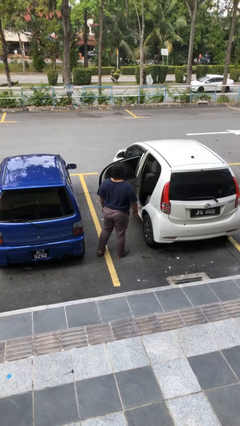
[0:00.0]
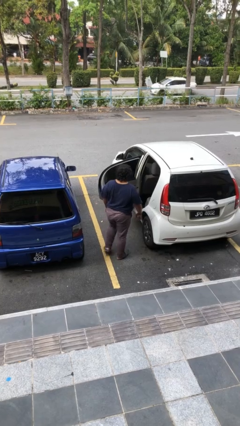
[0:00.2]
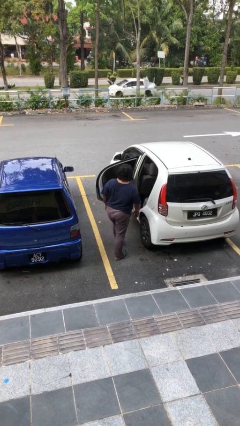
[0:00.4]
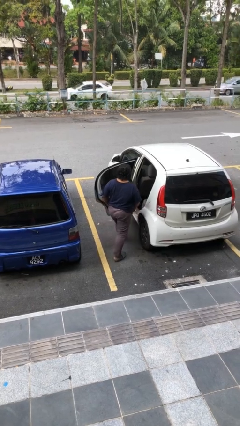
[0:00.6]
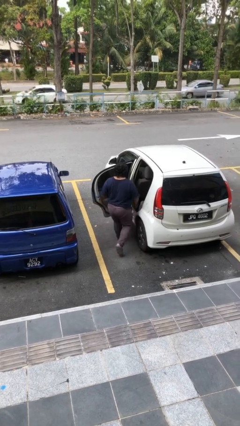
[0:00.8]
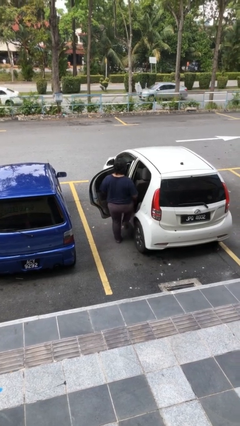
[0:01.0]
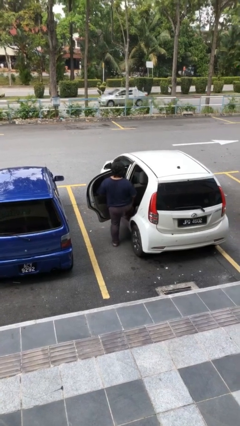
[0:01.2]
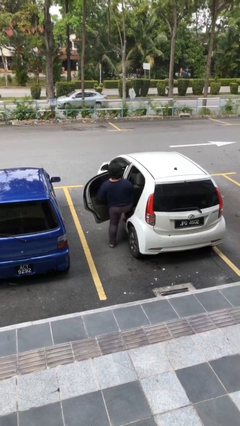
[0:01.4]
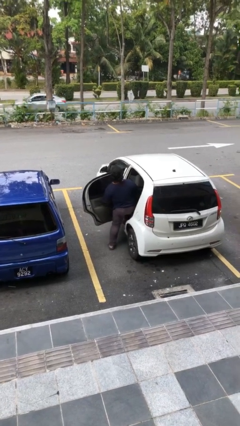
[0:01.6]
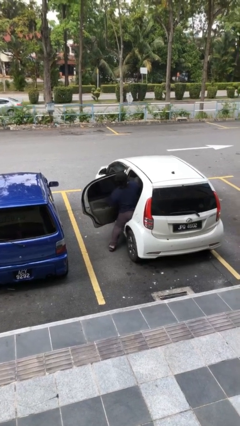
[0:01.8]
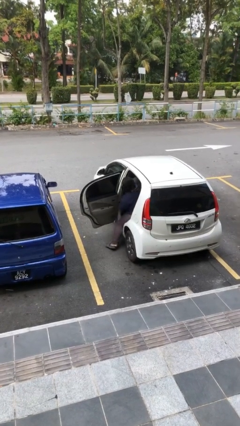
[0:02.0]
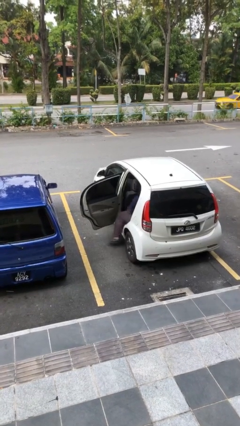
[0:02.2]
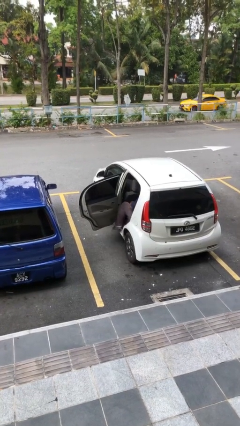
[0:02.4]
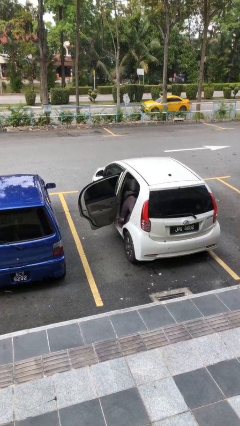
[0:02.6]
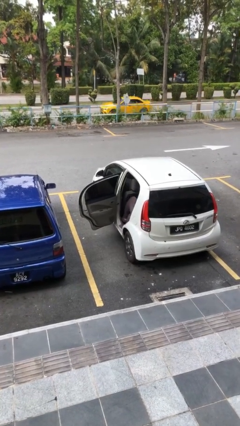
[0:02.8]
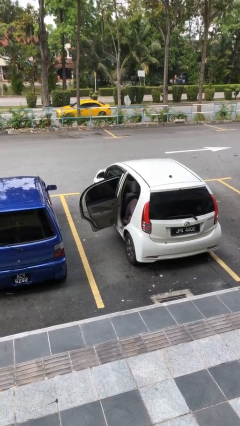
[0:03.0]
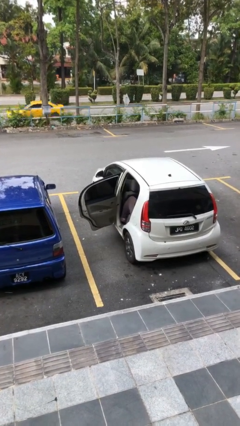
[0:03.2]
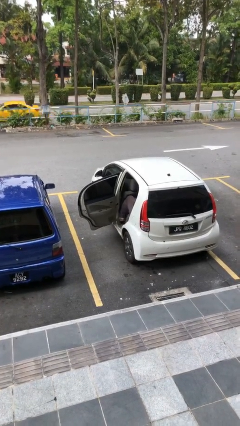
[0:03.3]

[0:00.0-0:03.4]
person enters car

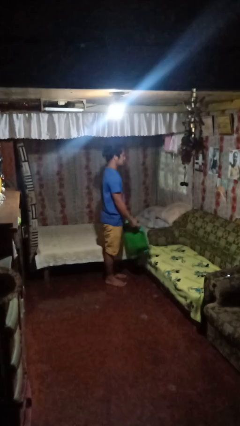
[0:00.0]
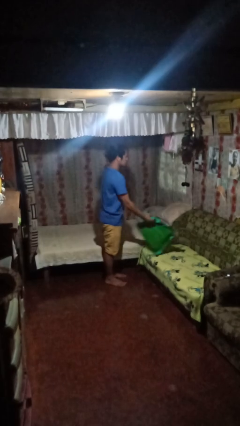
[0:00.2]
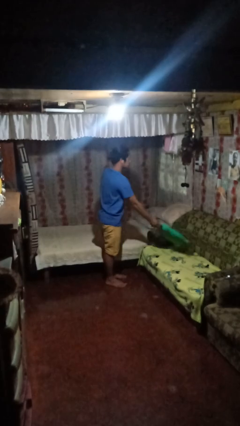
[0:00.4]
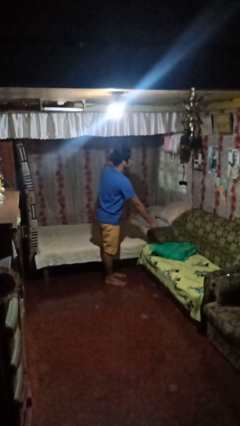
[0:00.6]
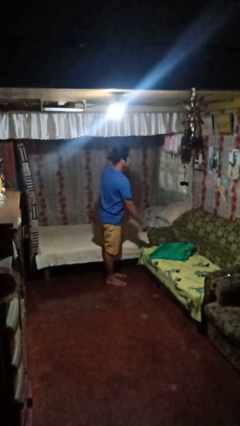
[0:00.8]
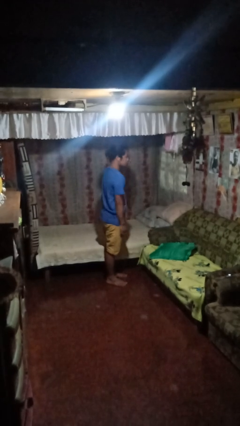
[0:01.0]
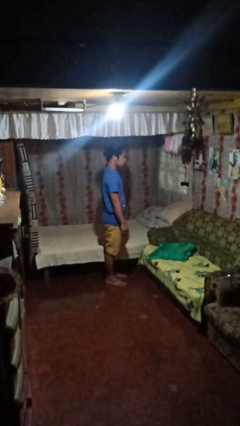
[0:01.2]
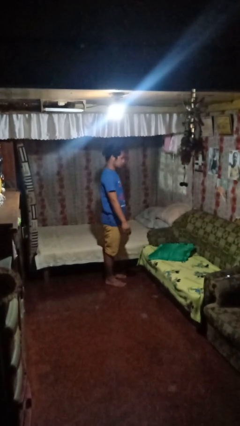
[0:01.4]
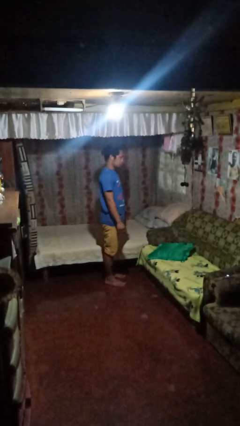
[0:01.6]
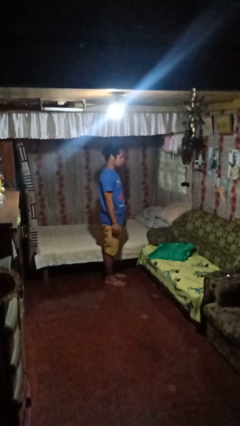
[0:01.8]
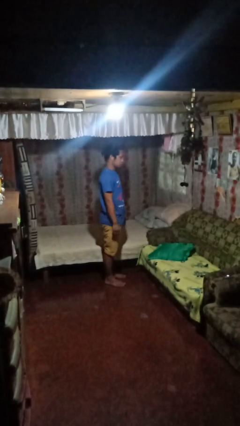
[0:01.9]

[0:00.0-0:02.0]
person puts down object on couch

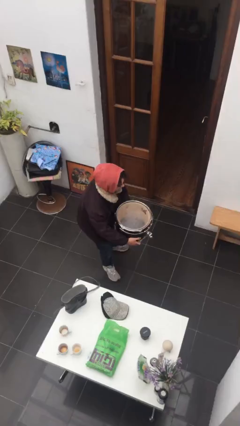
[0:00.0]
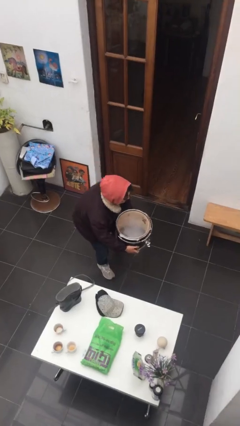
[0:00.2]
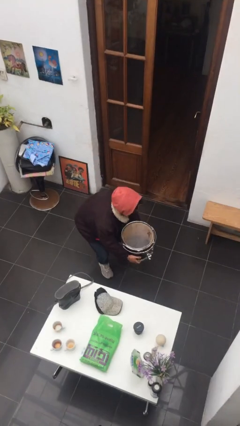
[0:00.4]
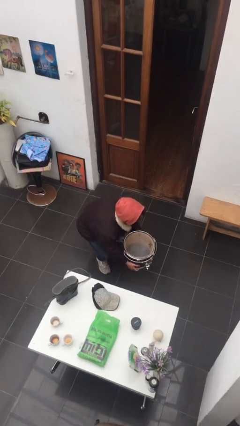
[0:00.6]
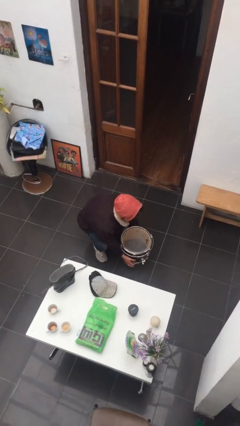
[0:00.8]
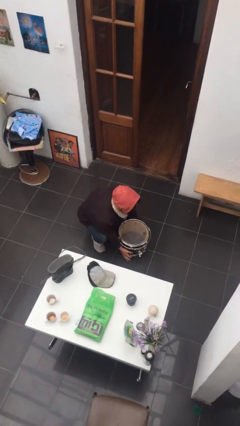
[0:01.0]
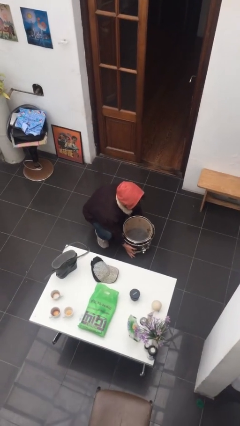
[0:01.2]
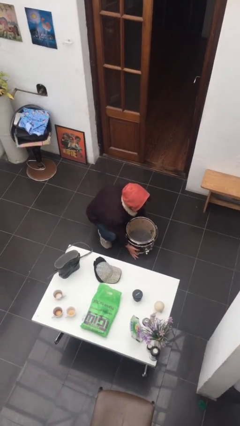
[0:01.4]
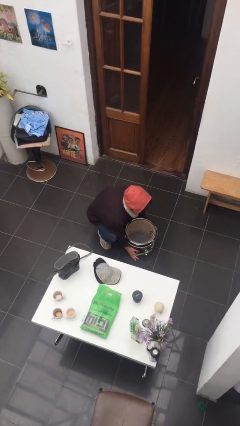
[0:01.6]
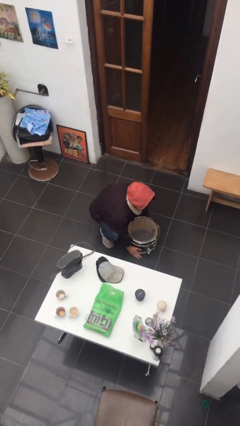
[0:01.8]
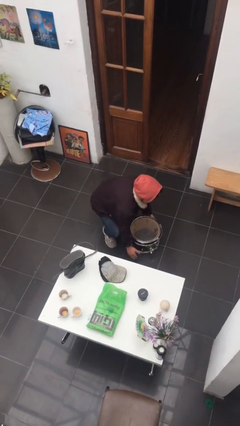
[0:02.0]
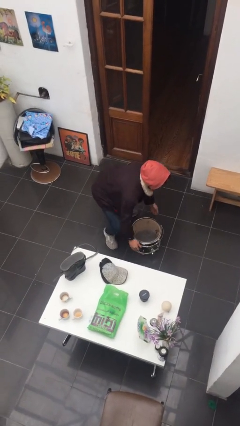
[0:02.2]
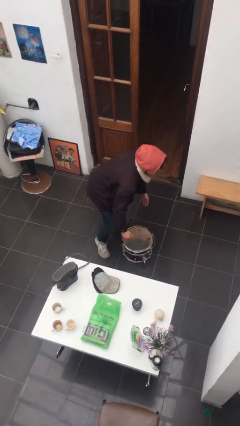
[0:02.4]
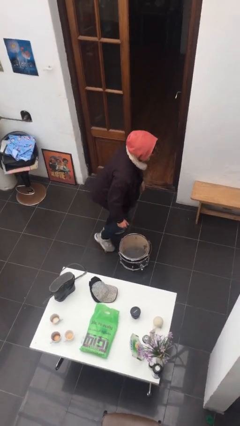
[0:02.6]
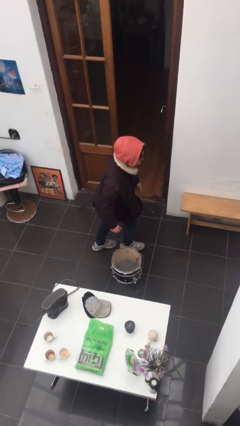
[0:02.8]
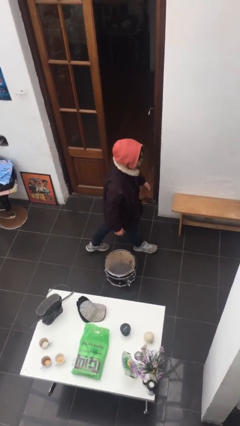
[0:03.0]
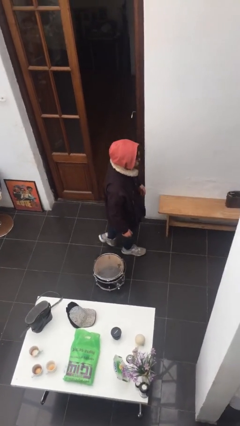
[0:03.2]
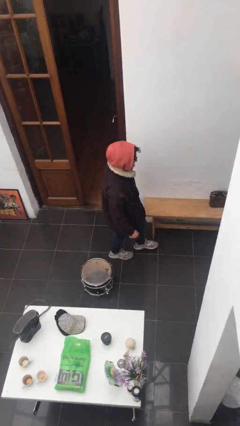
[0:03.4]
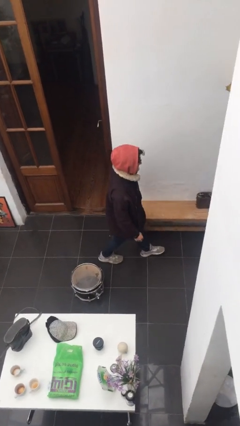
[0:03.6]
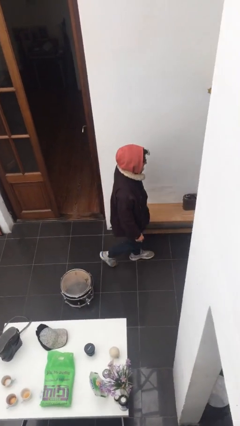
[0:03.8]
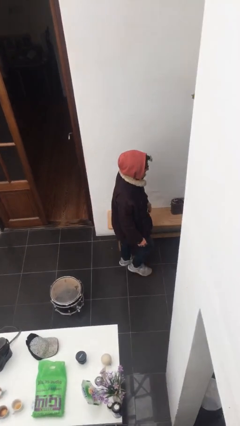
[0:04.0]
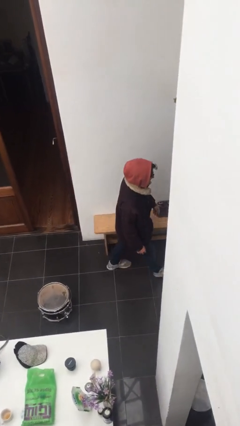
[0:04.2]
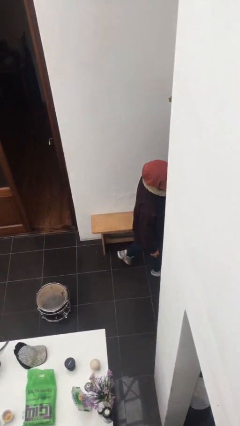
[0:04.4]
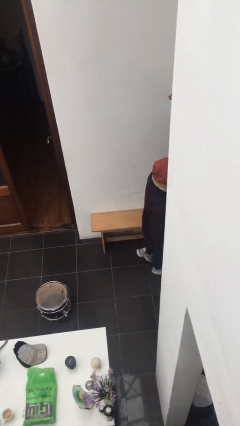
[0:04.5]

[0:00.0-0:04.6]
person puts down object on floor

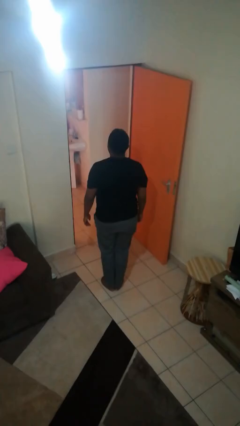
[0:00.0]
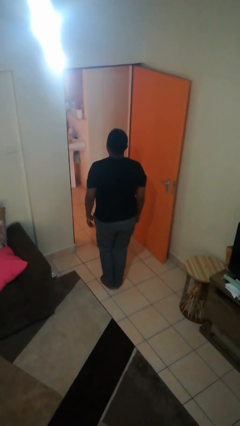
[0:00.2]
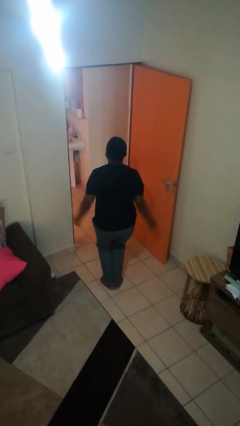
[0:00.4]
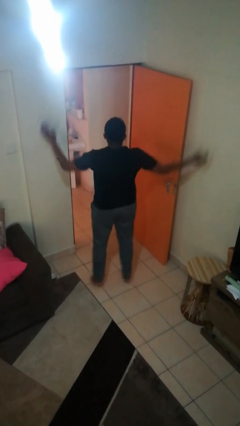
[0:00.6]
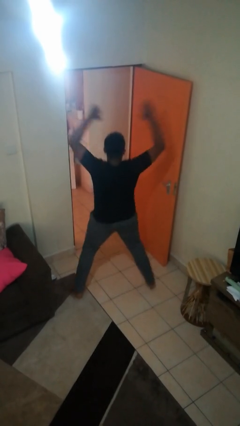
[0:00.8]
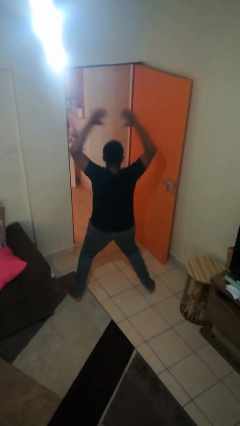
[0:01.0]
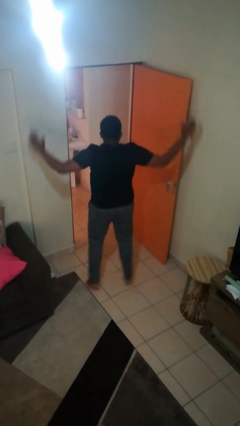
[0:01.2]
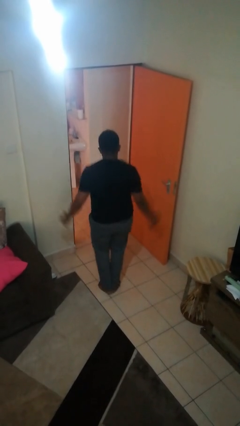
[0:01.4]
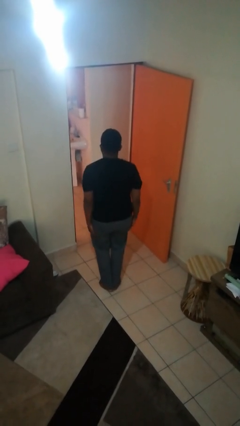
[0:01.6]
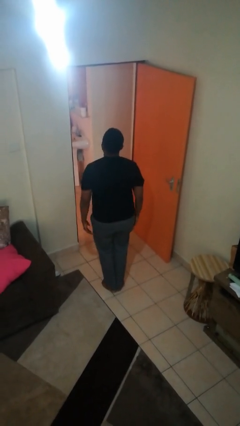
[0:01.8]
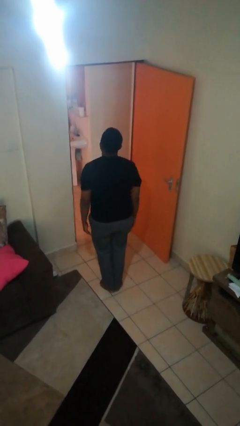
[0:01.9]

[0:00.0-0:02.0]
person exercises with jumping jacks

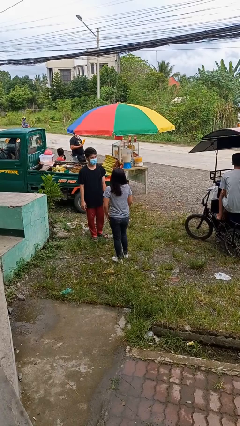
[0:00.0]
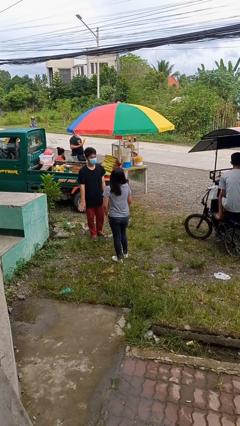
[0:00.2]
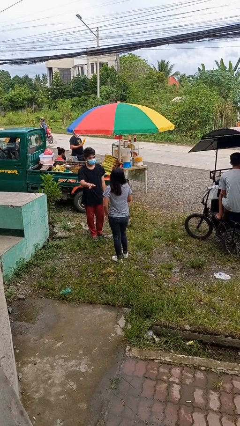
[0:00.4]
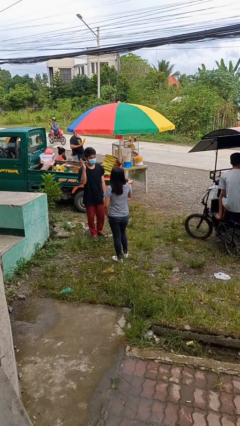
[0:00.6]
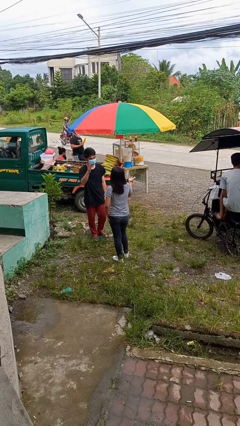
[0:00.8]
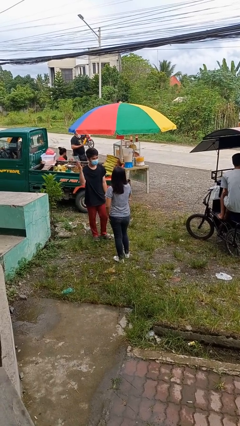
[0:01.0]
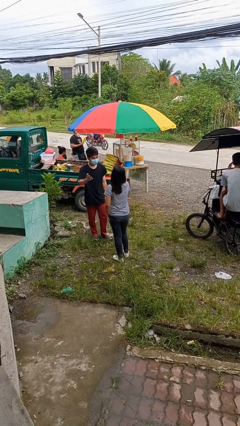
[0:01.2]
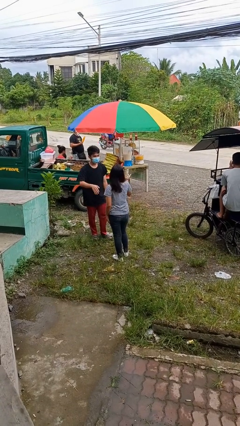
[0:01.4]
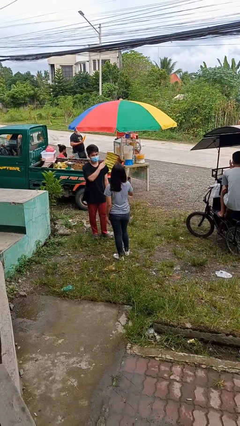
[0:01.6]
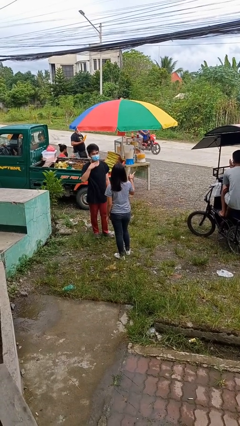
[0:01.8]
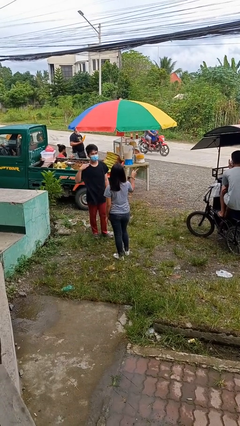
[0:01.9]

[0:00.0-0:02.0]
person talks to person

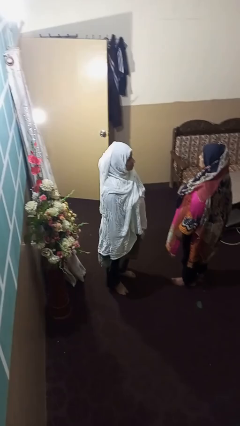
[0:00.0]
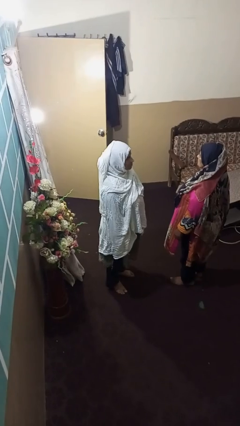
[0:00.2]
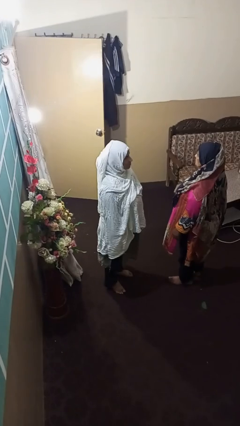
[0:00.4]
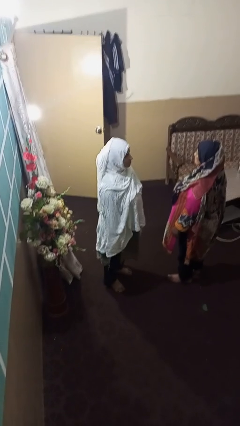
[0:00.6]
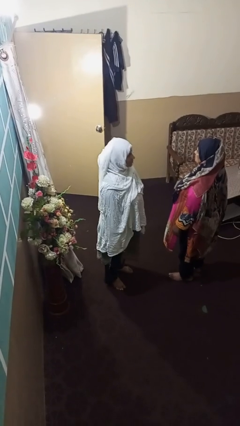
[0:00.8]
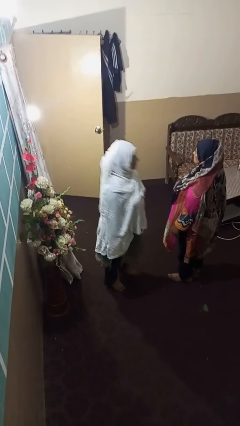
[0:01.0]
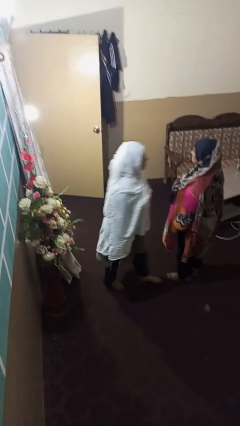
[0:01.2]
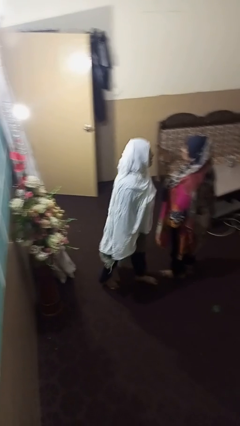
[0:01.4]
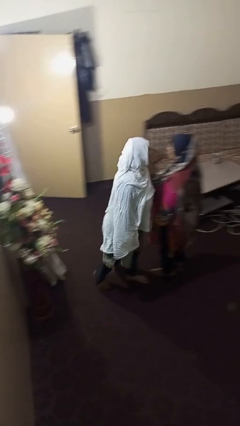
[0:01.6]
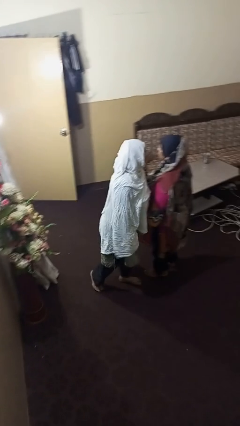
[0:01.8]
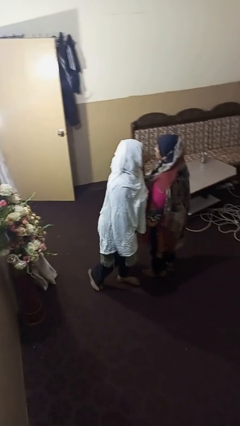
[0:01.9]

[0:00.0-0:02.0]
person laughs with person

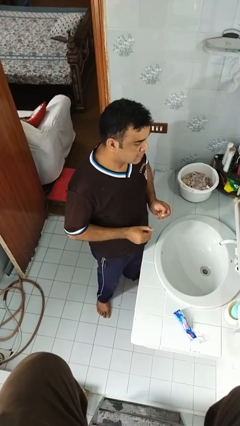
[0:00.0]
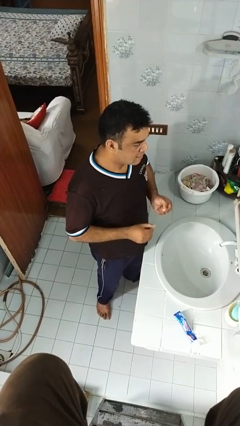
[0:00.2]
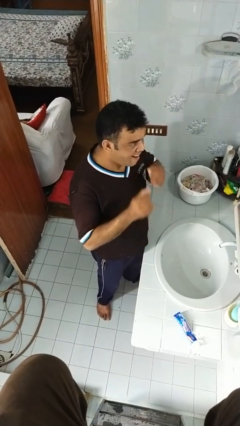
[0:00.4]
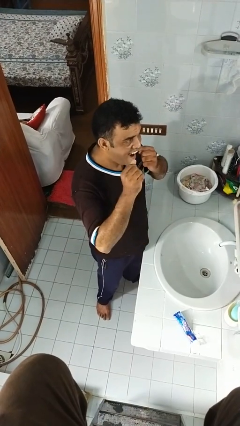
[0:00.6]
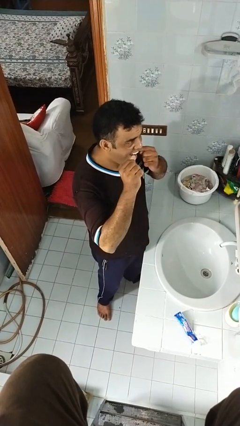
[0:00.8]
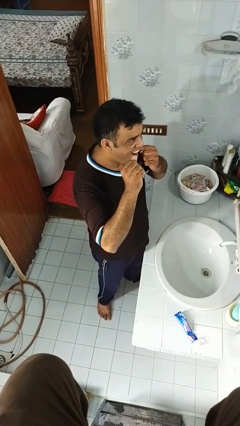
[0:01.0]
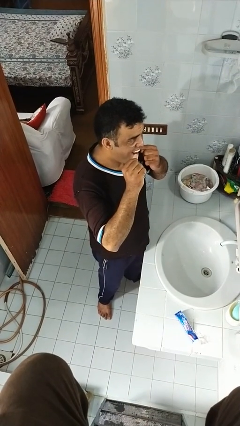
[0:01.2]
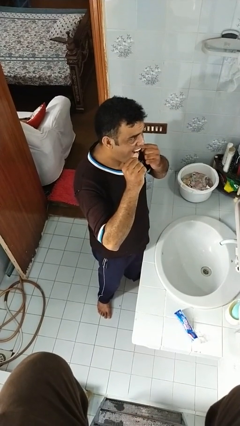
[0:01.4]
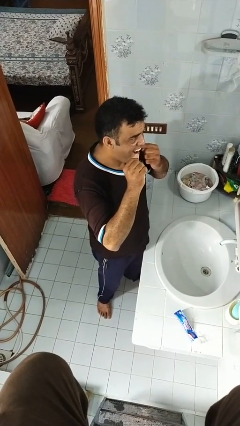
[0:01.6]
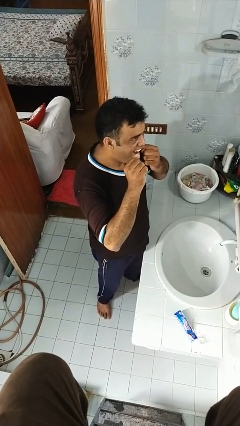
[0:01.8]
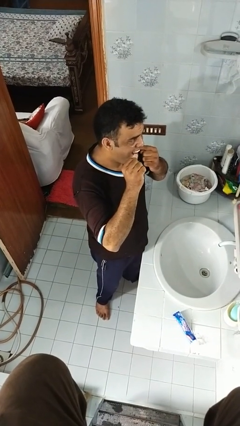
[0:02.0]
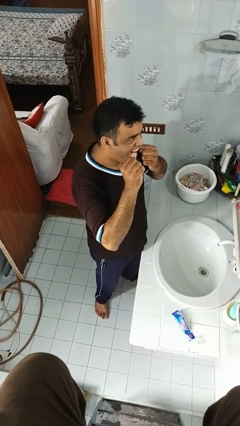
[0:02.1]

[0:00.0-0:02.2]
person flosses
